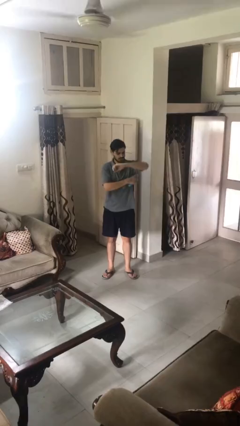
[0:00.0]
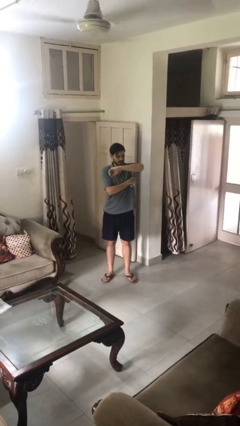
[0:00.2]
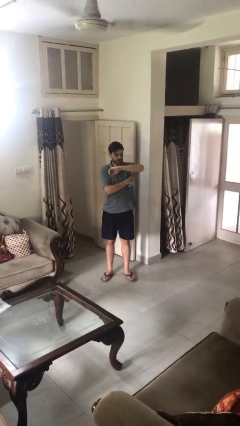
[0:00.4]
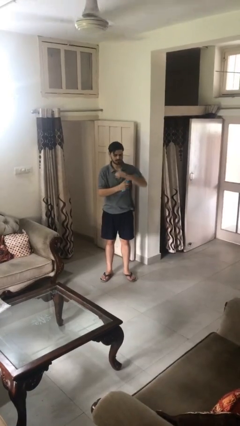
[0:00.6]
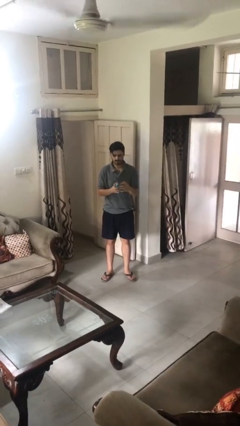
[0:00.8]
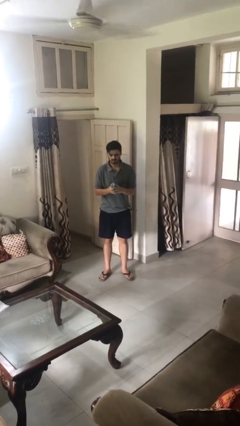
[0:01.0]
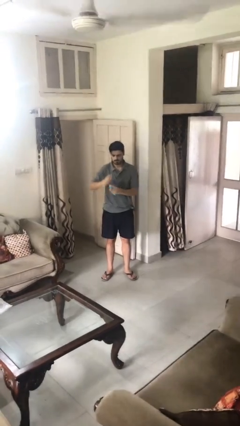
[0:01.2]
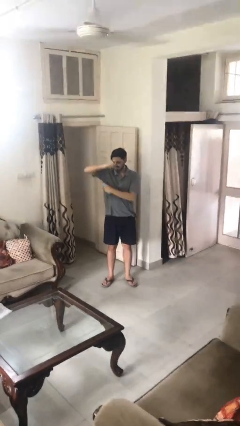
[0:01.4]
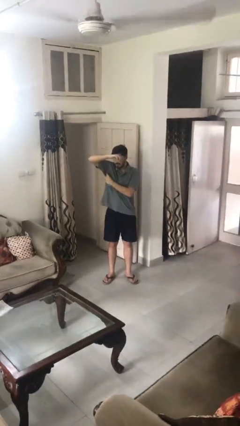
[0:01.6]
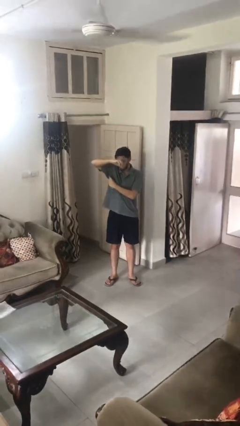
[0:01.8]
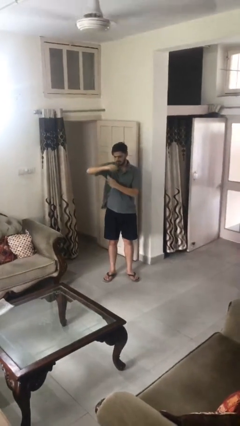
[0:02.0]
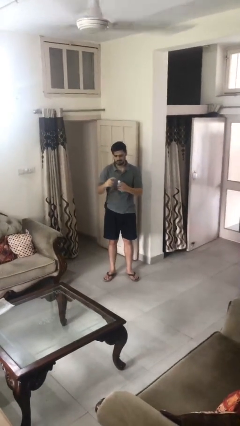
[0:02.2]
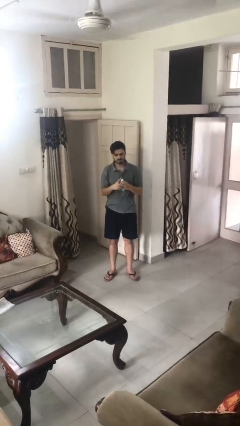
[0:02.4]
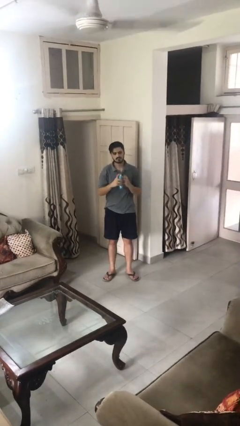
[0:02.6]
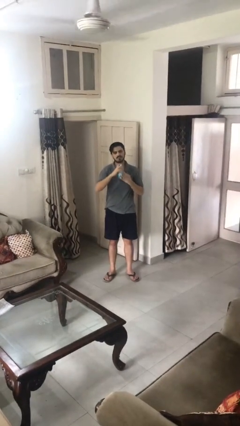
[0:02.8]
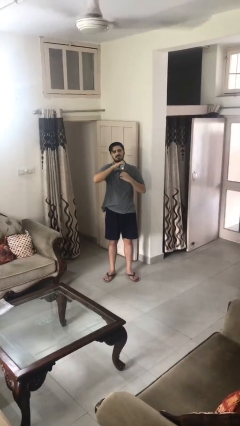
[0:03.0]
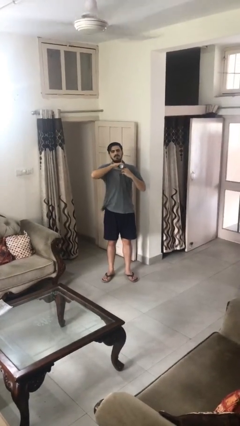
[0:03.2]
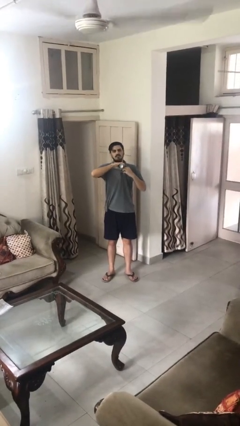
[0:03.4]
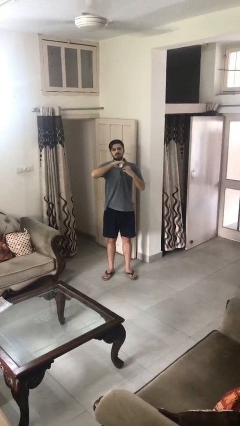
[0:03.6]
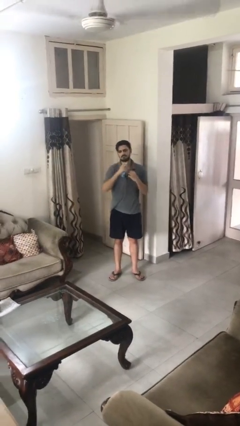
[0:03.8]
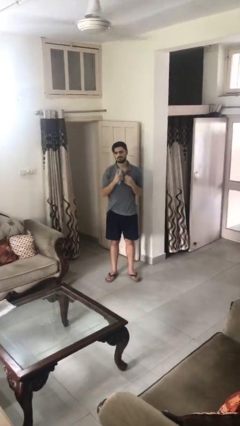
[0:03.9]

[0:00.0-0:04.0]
person applies deodorant

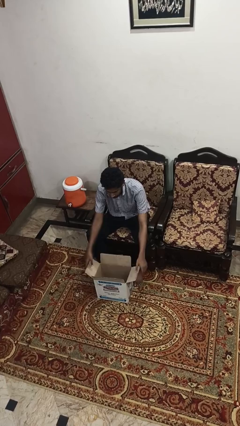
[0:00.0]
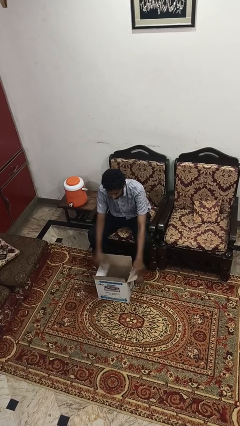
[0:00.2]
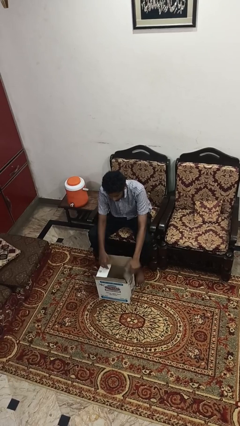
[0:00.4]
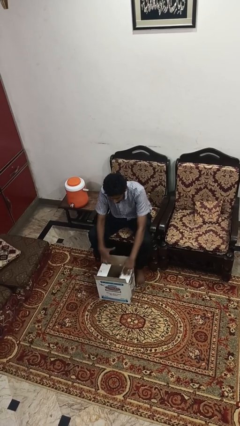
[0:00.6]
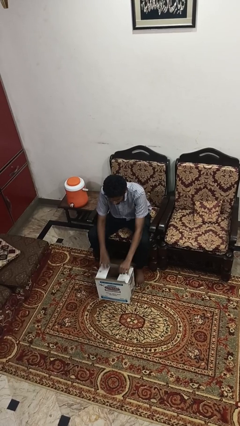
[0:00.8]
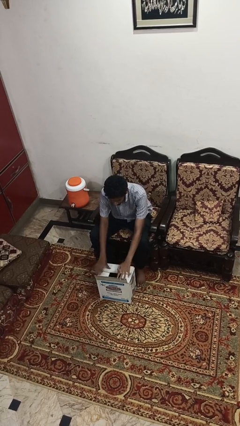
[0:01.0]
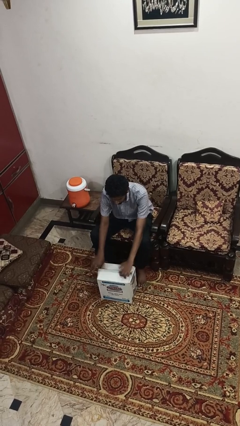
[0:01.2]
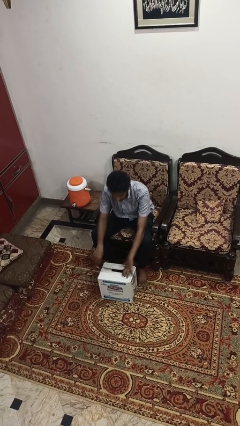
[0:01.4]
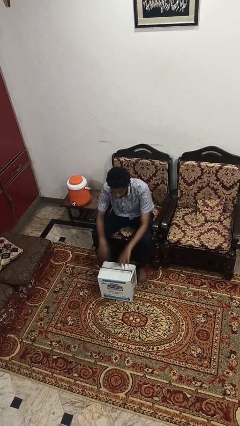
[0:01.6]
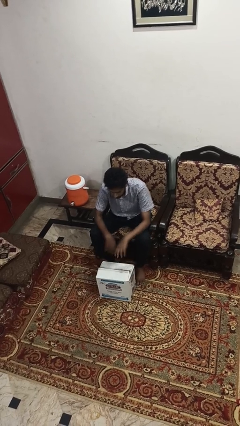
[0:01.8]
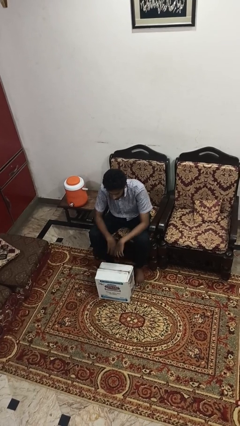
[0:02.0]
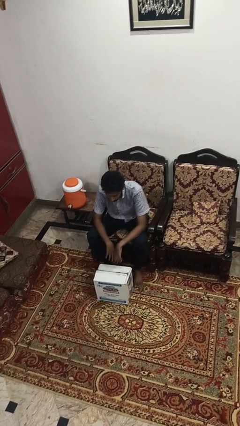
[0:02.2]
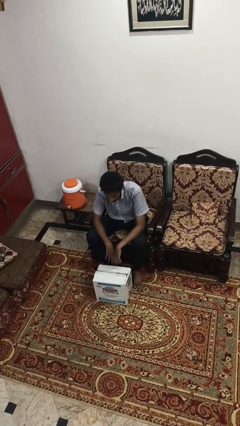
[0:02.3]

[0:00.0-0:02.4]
person closes box

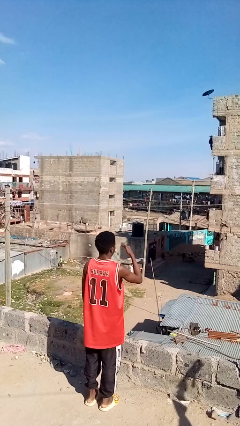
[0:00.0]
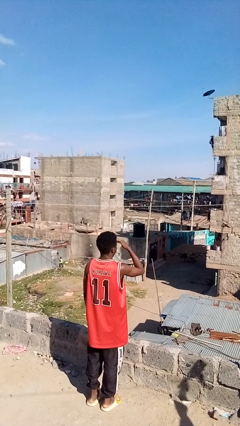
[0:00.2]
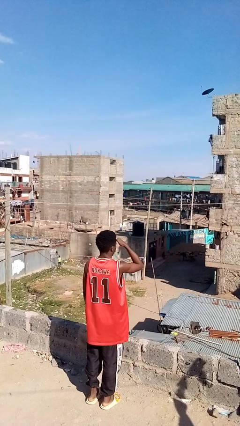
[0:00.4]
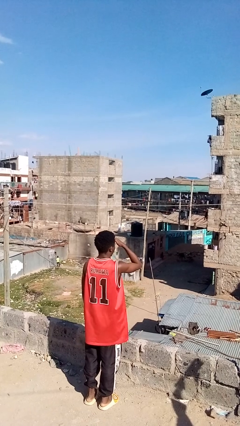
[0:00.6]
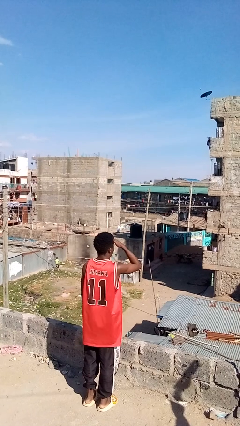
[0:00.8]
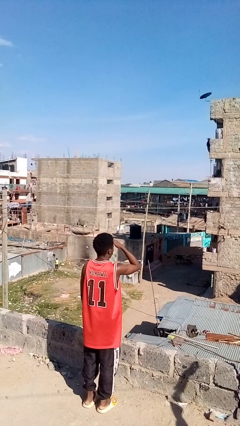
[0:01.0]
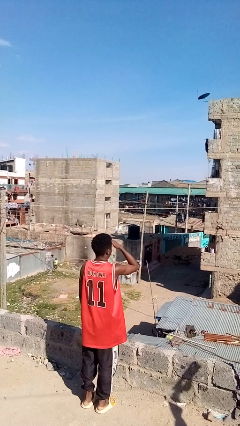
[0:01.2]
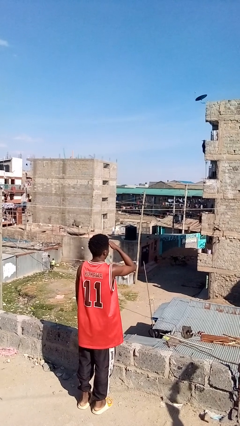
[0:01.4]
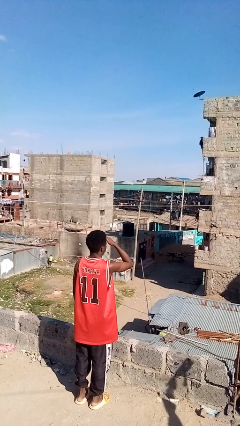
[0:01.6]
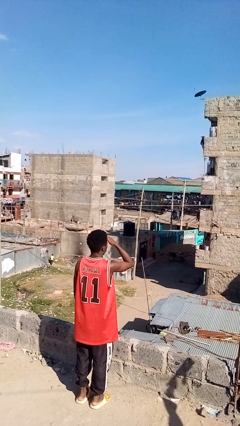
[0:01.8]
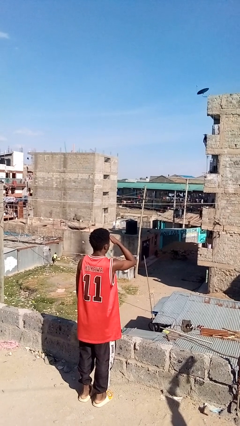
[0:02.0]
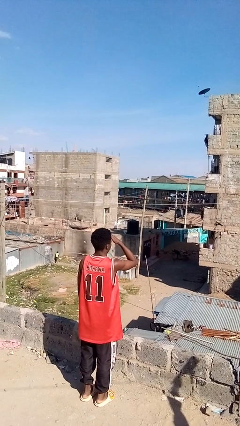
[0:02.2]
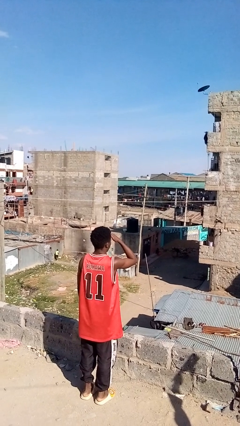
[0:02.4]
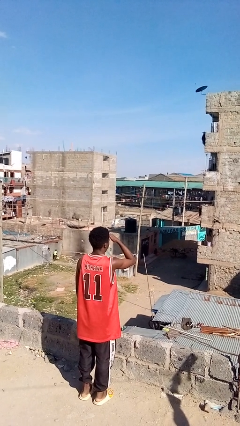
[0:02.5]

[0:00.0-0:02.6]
person shades eyes

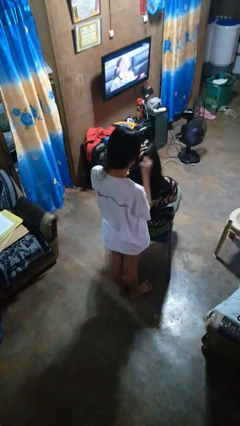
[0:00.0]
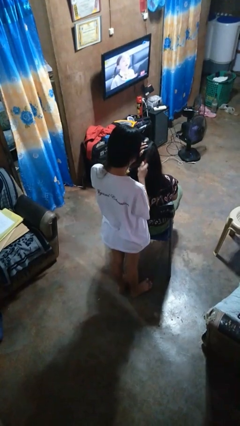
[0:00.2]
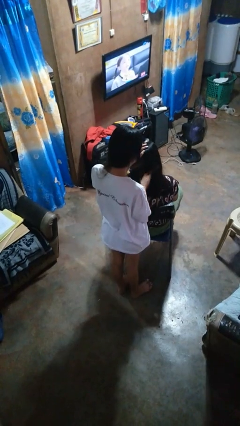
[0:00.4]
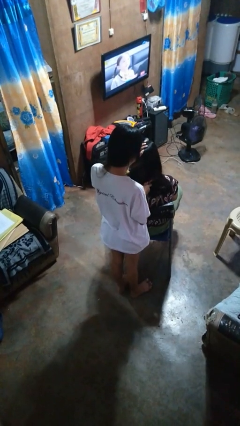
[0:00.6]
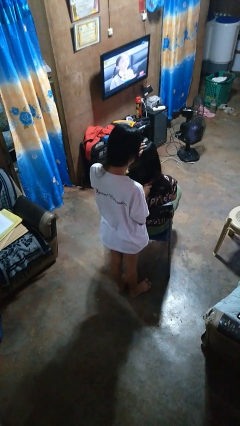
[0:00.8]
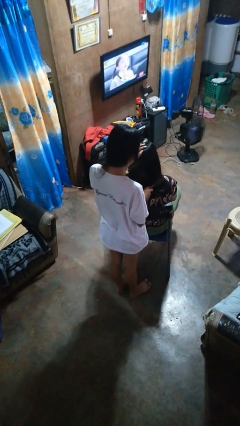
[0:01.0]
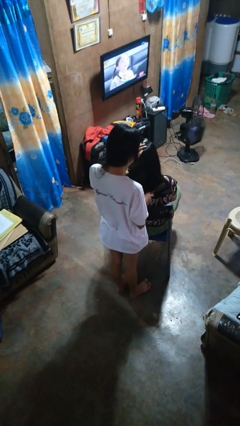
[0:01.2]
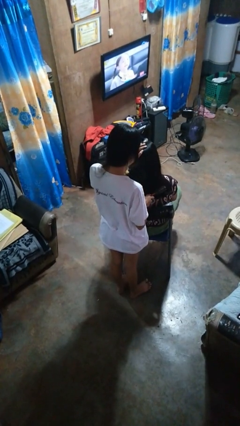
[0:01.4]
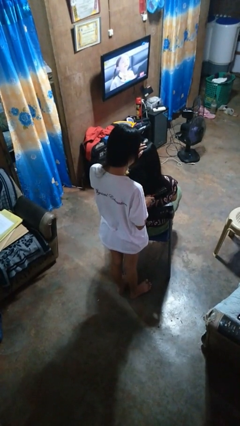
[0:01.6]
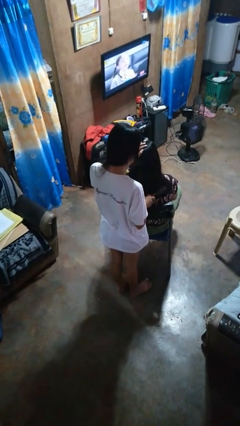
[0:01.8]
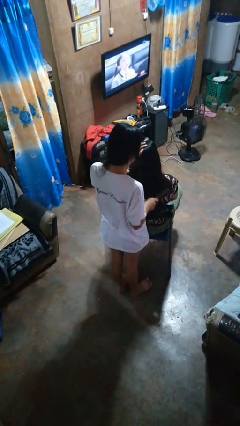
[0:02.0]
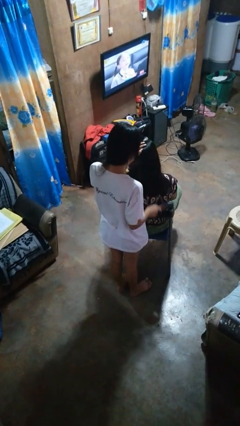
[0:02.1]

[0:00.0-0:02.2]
person brushes hair of person

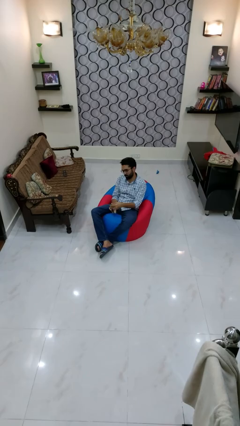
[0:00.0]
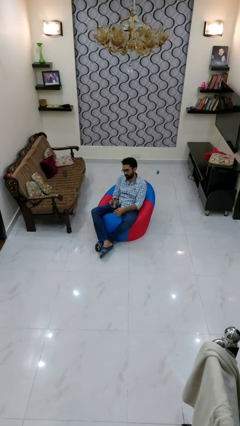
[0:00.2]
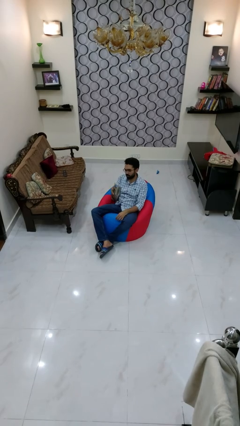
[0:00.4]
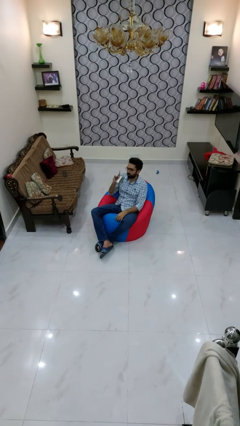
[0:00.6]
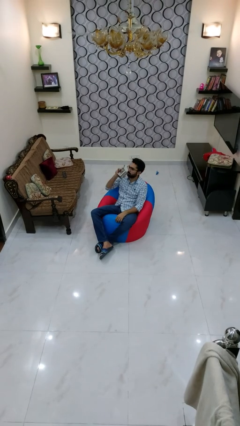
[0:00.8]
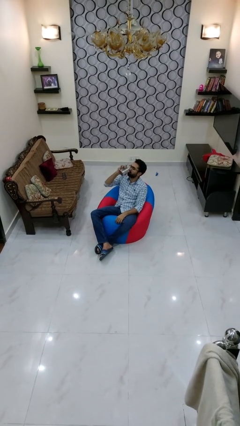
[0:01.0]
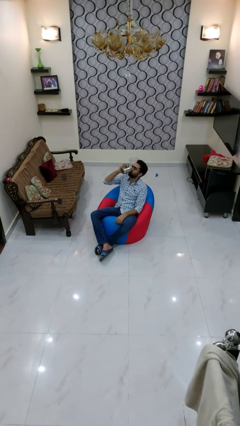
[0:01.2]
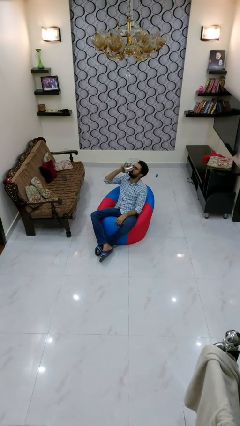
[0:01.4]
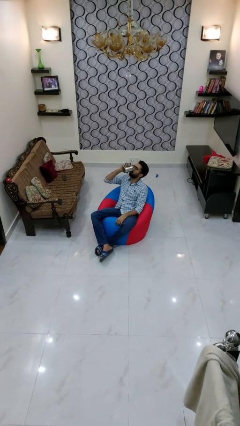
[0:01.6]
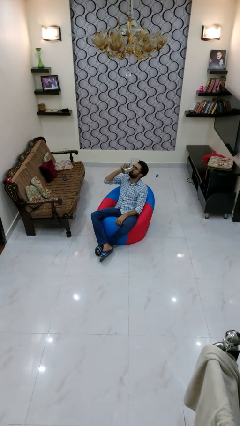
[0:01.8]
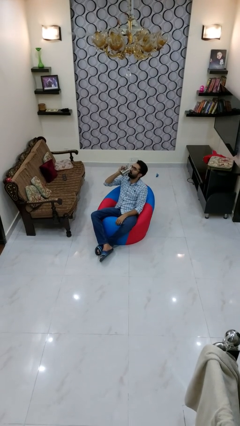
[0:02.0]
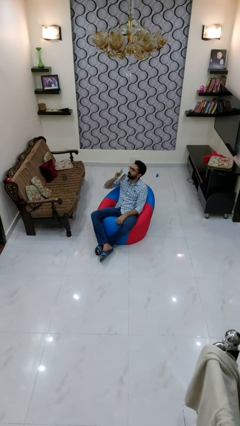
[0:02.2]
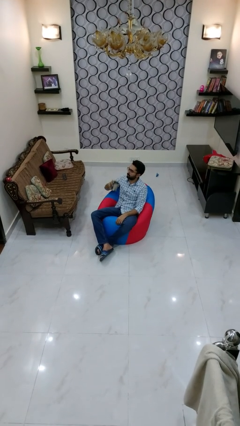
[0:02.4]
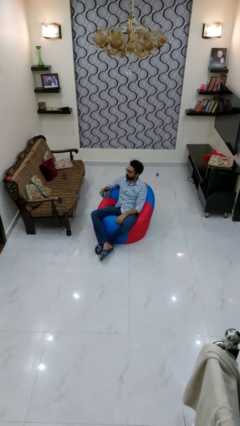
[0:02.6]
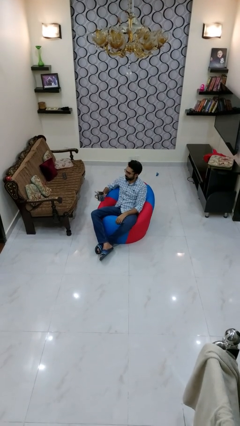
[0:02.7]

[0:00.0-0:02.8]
person drinks from mug

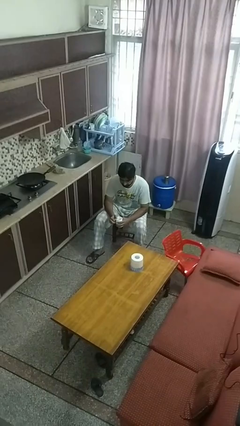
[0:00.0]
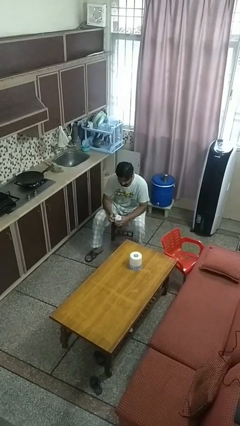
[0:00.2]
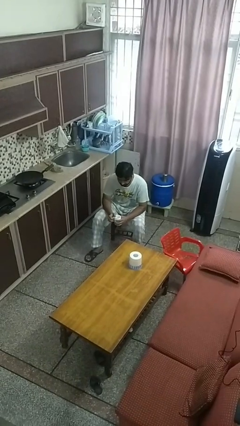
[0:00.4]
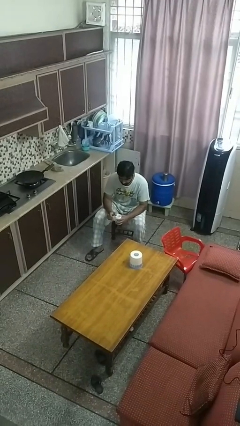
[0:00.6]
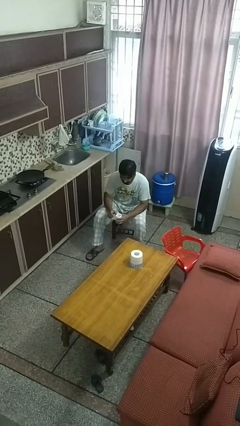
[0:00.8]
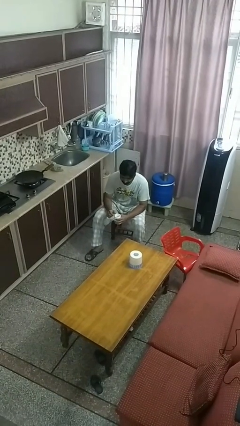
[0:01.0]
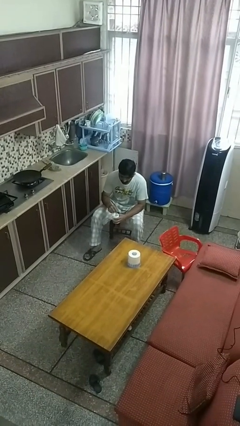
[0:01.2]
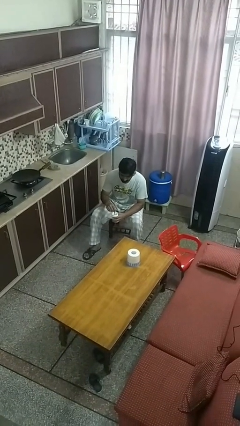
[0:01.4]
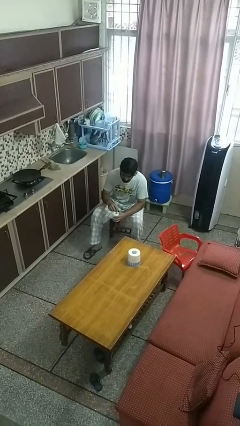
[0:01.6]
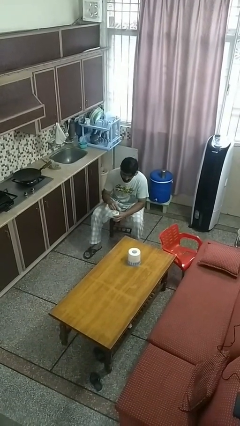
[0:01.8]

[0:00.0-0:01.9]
person stirs mug

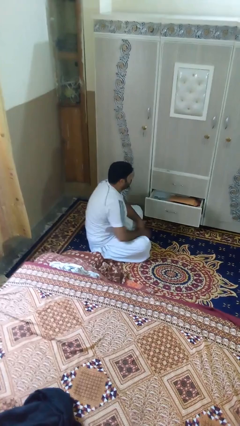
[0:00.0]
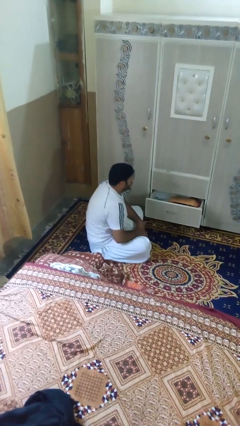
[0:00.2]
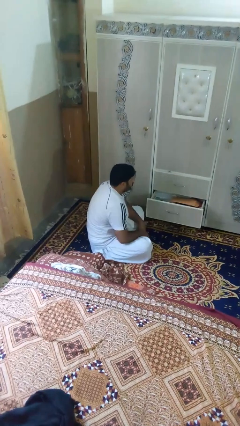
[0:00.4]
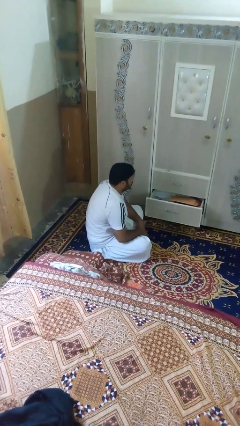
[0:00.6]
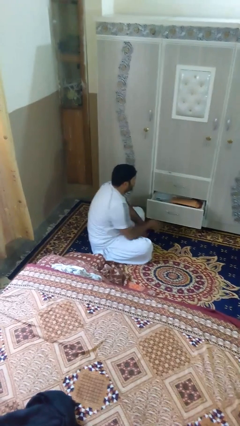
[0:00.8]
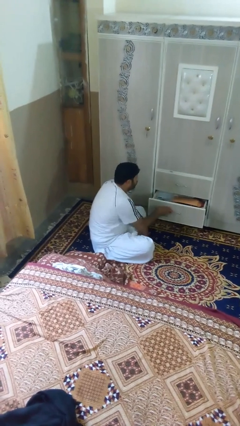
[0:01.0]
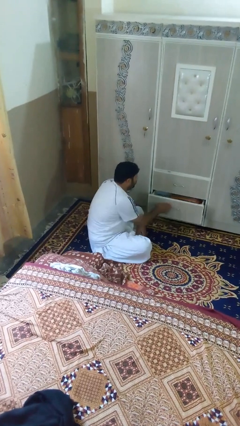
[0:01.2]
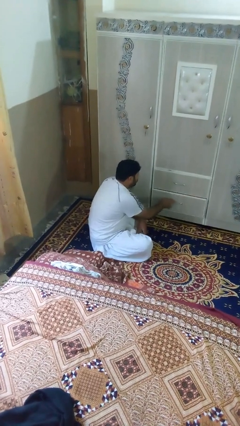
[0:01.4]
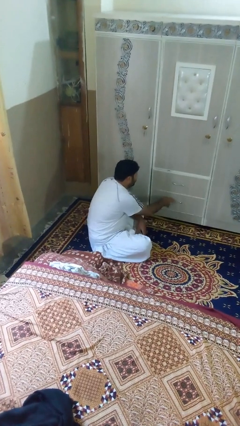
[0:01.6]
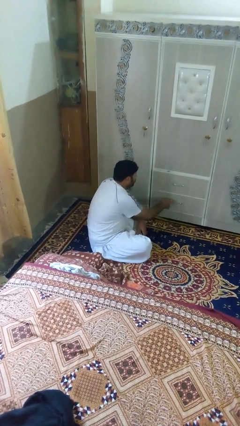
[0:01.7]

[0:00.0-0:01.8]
person closes dresser drawer
